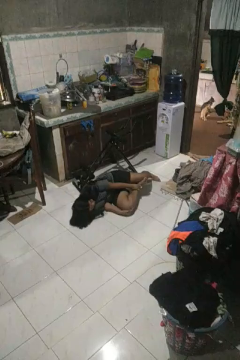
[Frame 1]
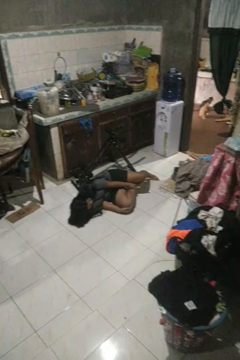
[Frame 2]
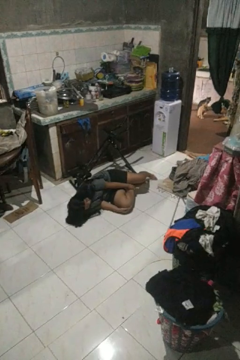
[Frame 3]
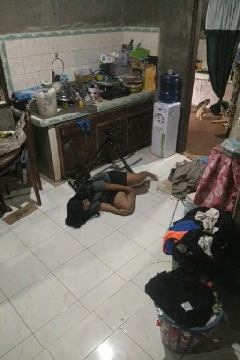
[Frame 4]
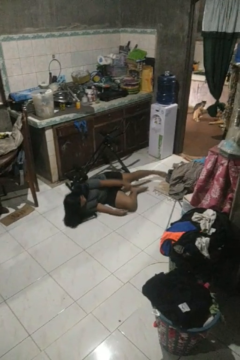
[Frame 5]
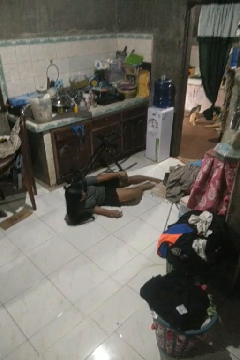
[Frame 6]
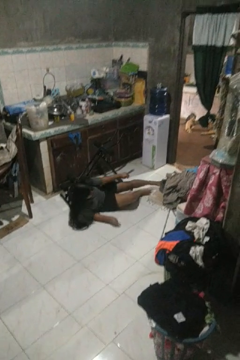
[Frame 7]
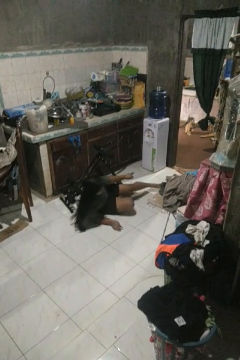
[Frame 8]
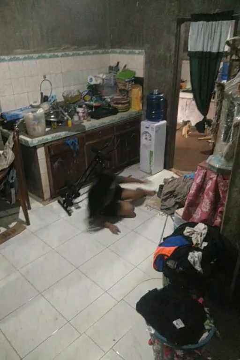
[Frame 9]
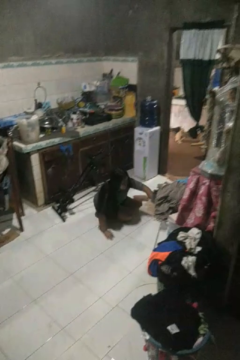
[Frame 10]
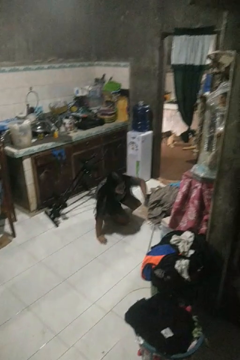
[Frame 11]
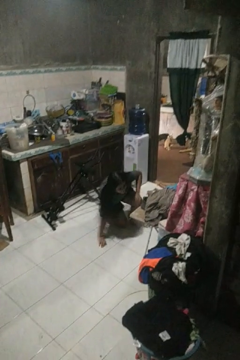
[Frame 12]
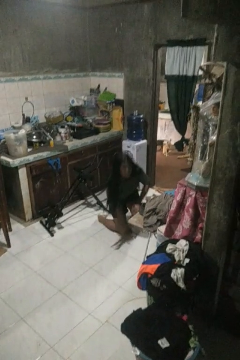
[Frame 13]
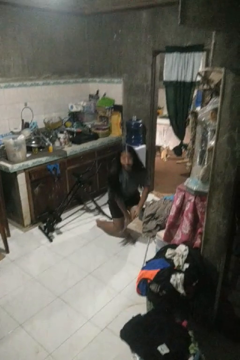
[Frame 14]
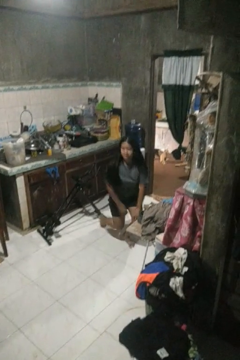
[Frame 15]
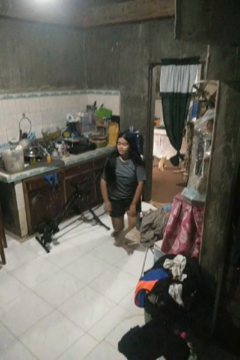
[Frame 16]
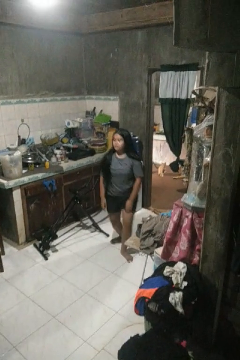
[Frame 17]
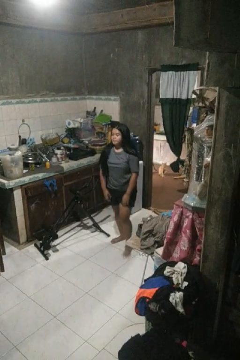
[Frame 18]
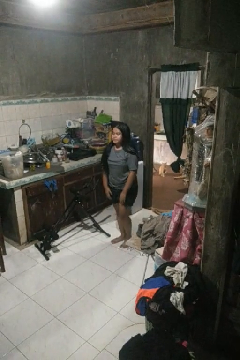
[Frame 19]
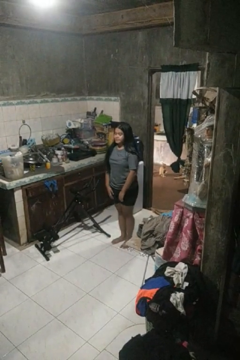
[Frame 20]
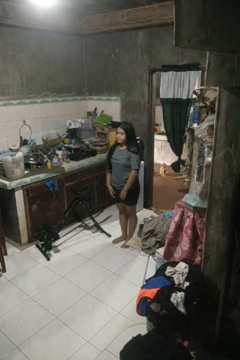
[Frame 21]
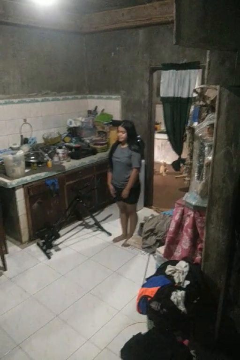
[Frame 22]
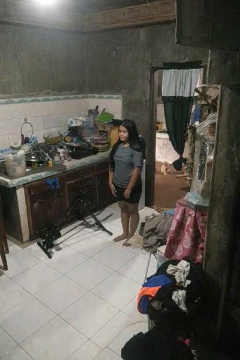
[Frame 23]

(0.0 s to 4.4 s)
person stands up from floor

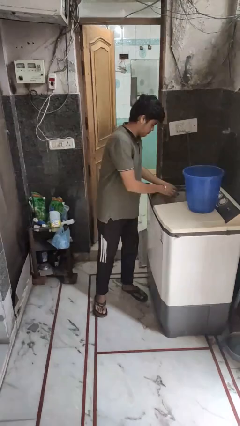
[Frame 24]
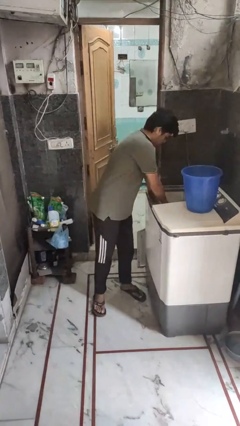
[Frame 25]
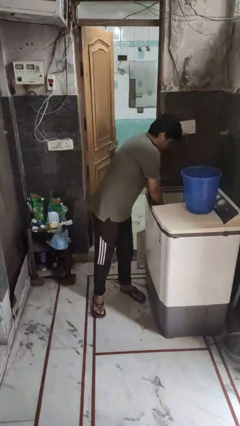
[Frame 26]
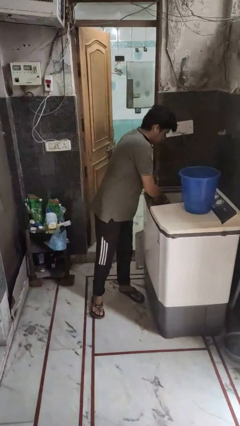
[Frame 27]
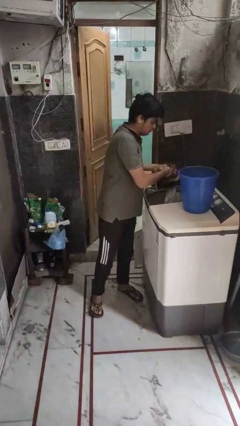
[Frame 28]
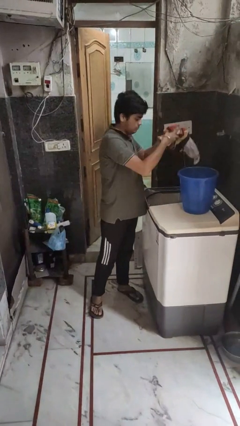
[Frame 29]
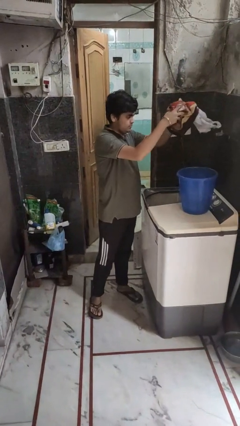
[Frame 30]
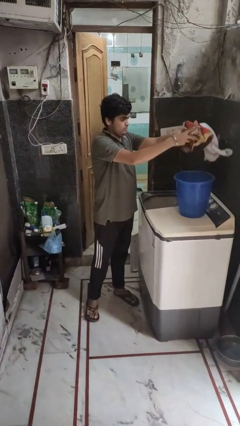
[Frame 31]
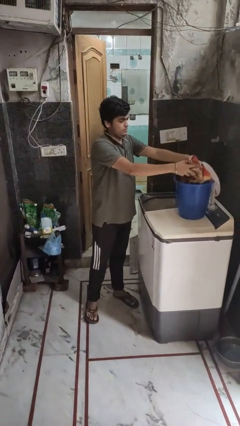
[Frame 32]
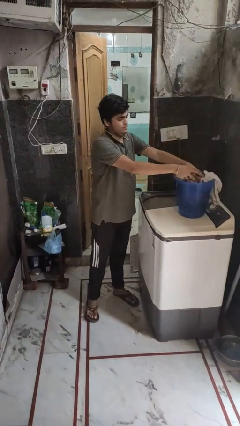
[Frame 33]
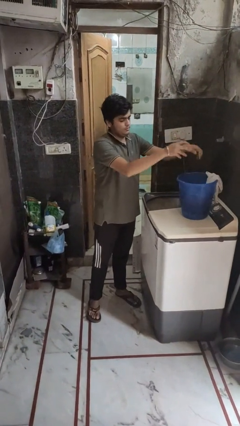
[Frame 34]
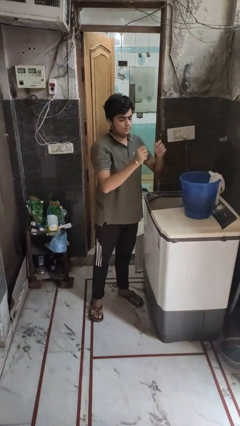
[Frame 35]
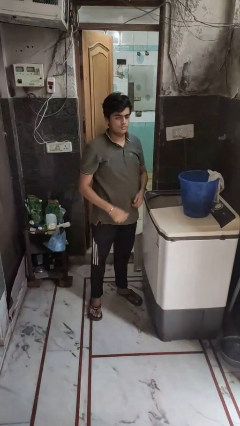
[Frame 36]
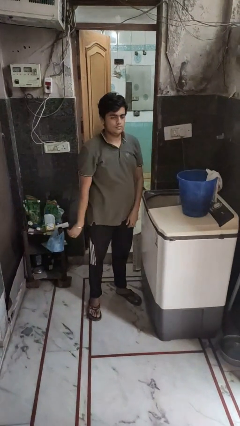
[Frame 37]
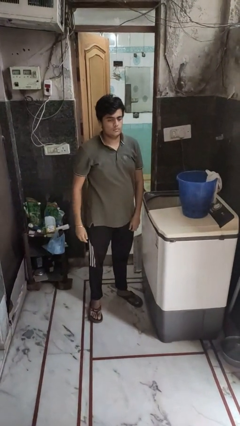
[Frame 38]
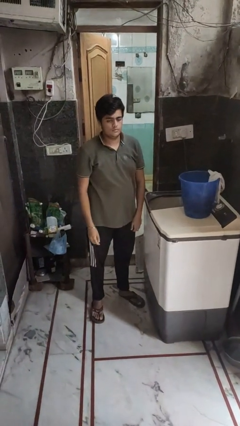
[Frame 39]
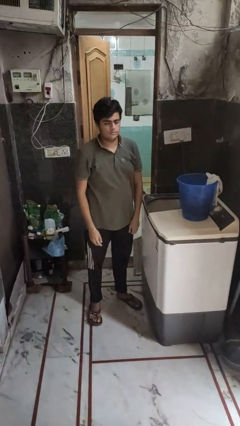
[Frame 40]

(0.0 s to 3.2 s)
person unloads clotheswasher

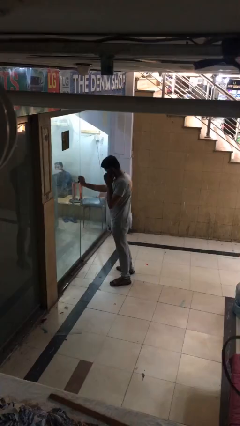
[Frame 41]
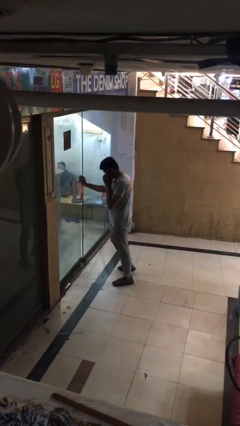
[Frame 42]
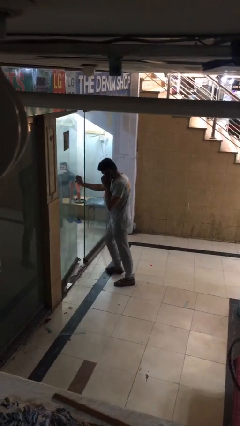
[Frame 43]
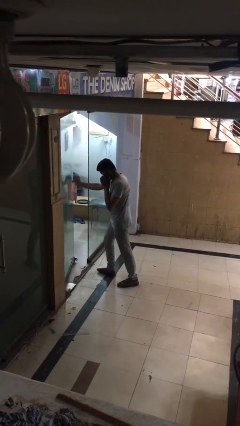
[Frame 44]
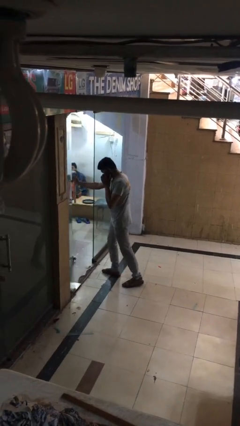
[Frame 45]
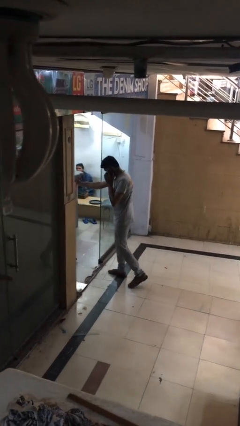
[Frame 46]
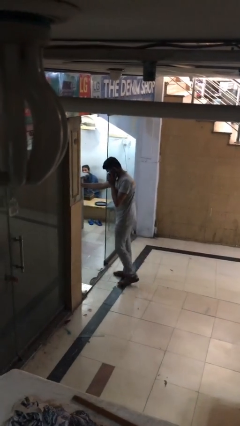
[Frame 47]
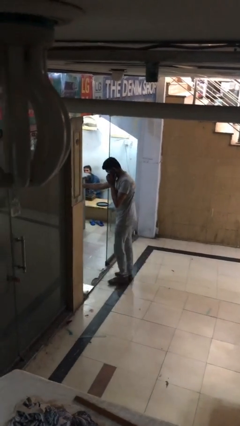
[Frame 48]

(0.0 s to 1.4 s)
person opens facility door

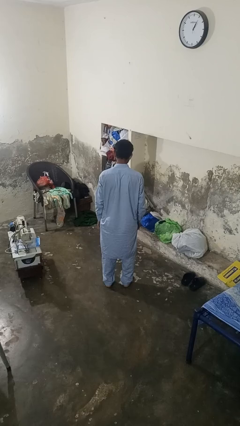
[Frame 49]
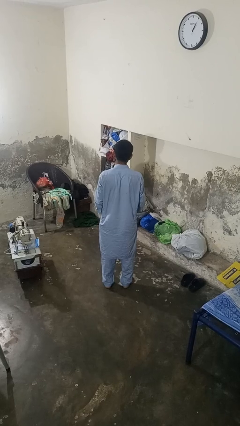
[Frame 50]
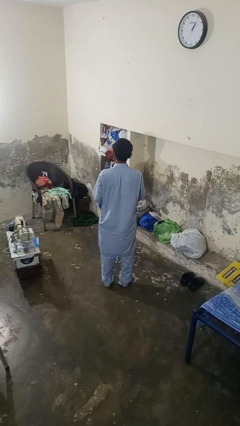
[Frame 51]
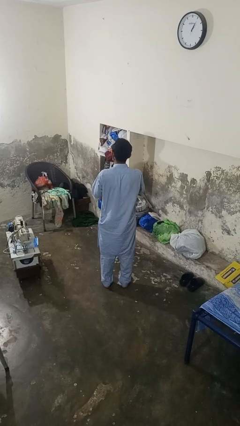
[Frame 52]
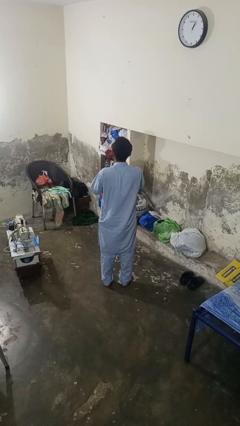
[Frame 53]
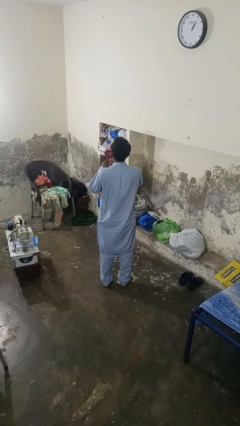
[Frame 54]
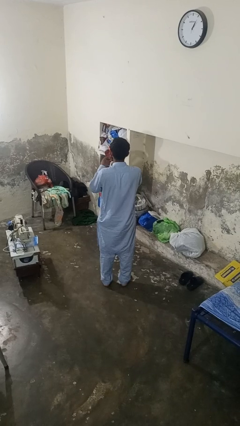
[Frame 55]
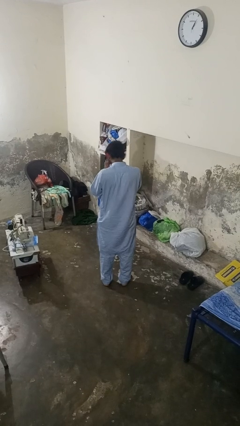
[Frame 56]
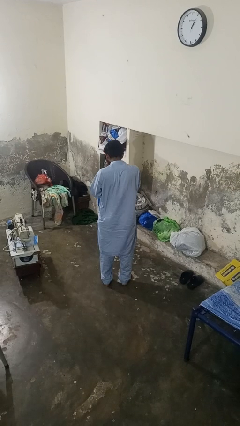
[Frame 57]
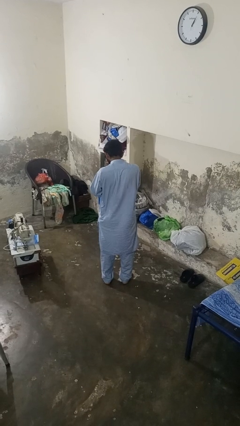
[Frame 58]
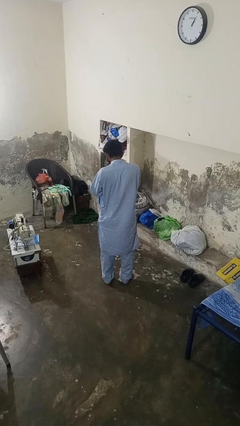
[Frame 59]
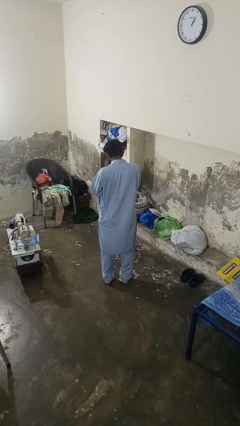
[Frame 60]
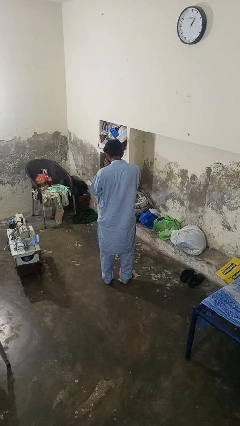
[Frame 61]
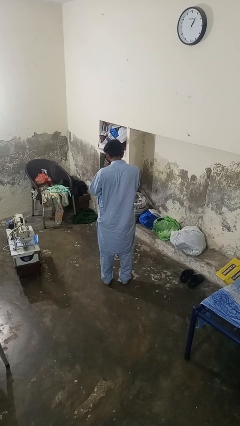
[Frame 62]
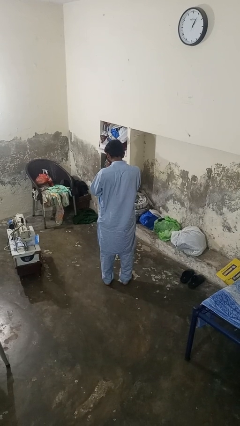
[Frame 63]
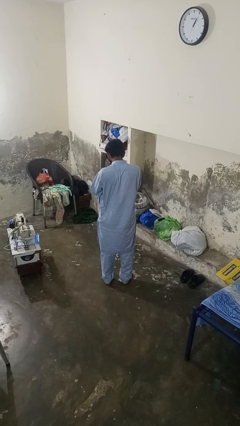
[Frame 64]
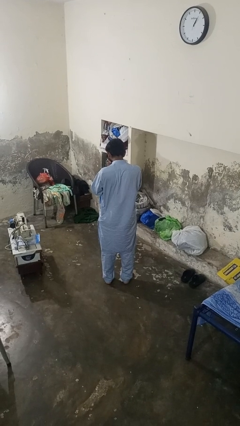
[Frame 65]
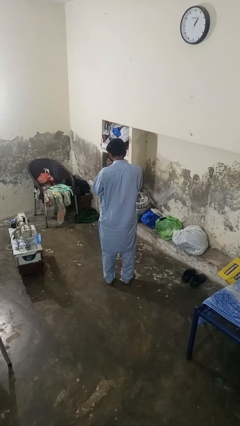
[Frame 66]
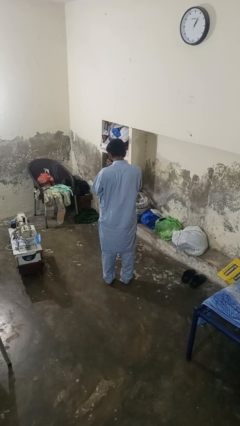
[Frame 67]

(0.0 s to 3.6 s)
person sneezes into hand

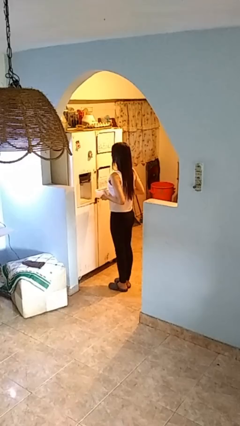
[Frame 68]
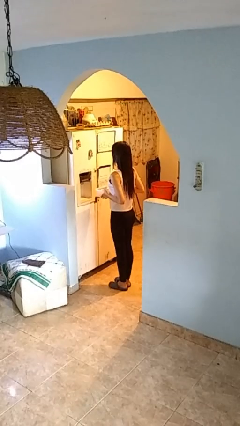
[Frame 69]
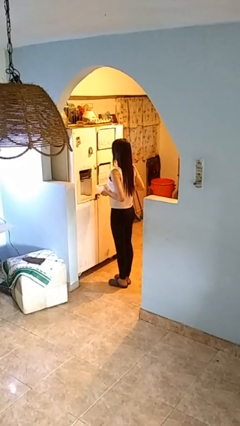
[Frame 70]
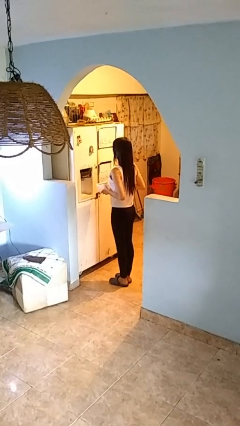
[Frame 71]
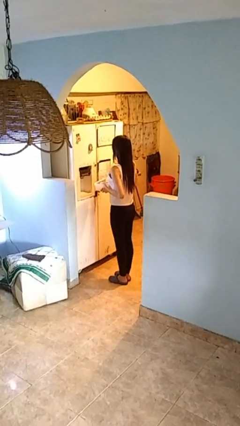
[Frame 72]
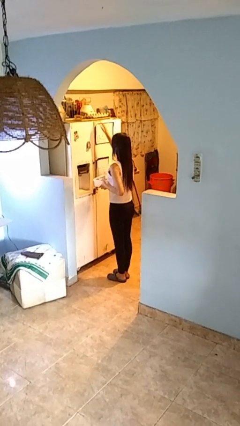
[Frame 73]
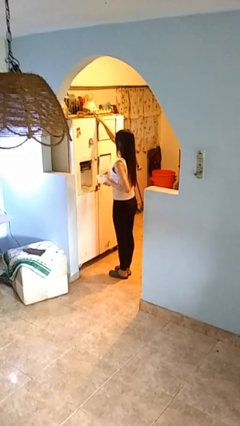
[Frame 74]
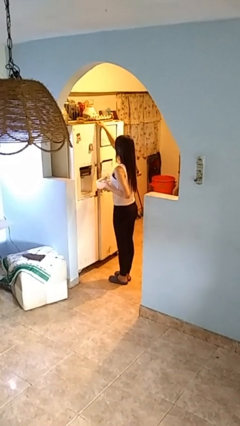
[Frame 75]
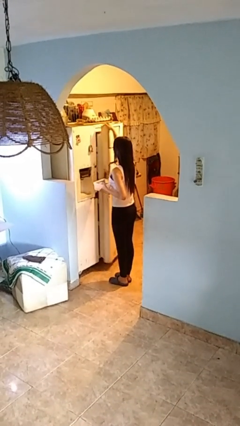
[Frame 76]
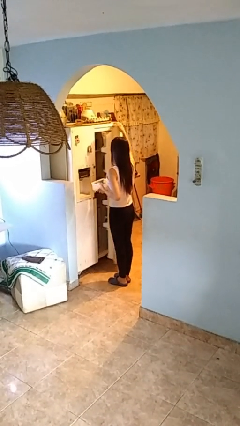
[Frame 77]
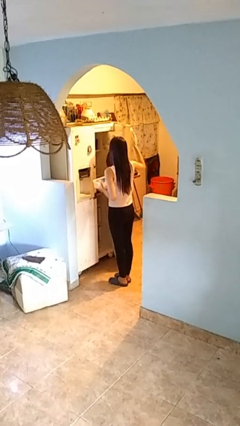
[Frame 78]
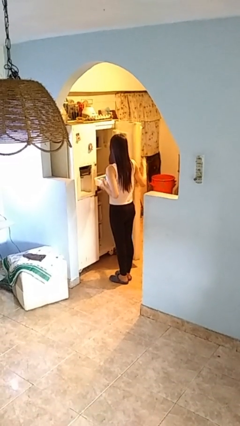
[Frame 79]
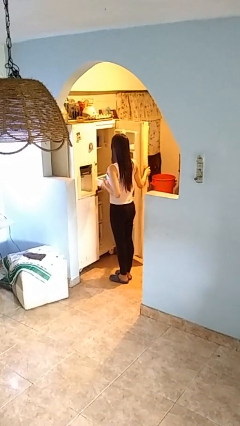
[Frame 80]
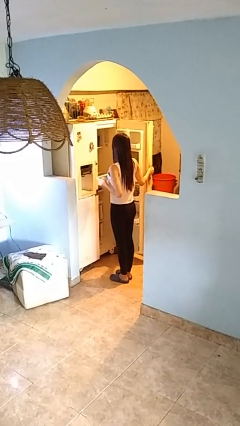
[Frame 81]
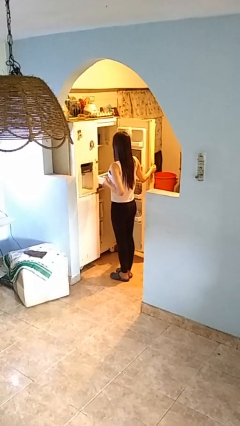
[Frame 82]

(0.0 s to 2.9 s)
person opens refrigerator

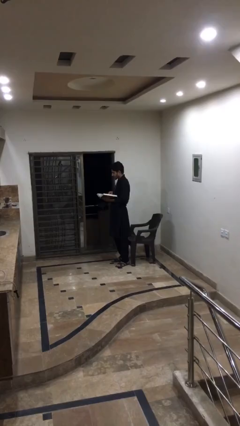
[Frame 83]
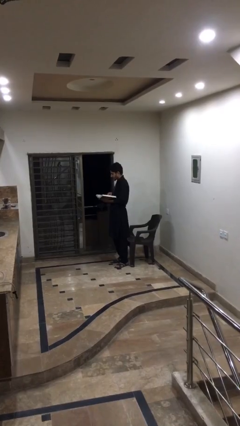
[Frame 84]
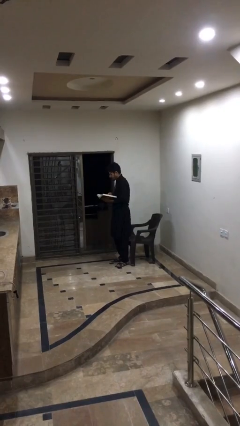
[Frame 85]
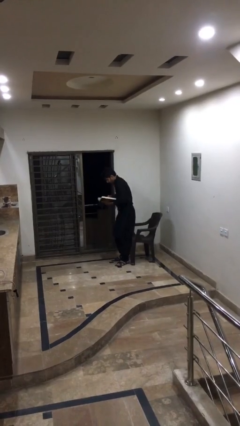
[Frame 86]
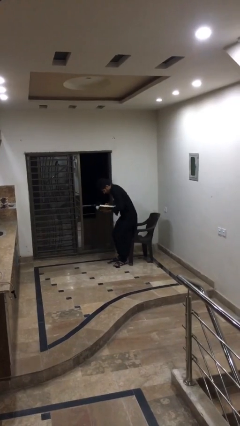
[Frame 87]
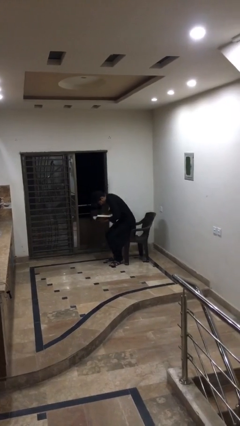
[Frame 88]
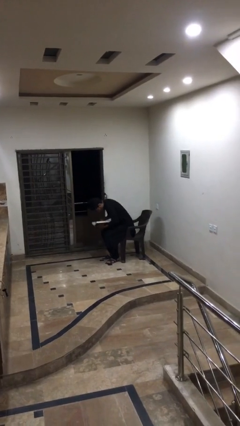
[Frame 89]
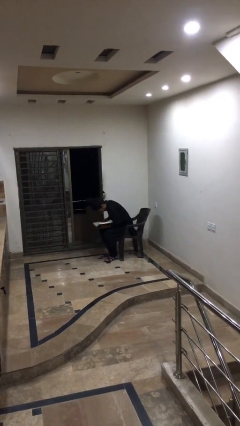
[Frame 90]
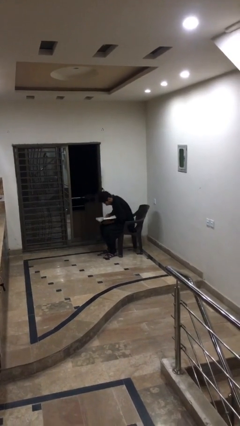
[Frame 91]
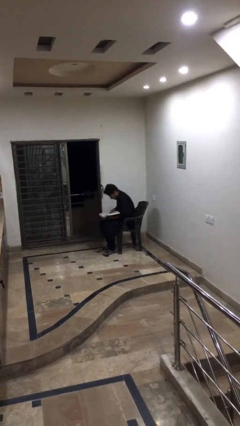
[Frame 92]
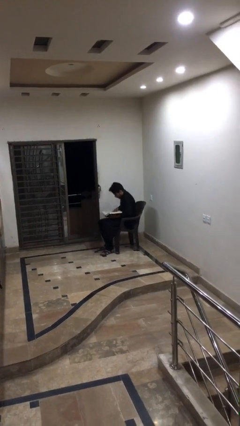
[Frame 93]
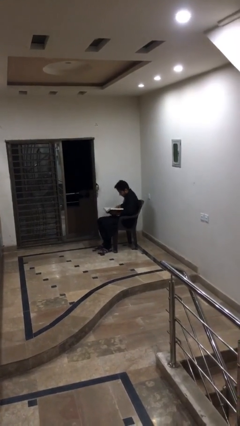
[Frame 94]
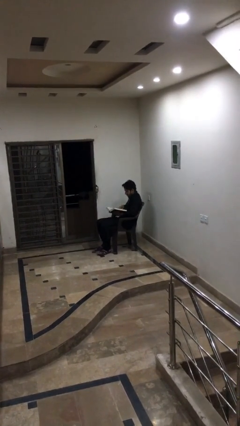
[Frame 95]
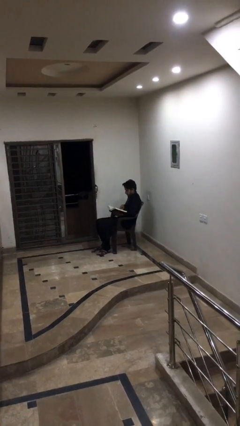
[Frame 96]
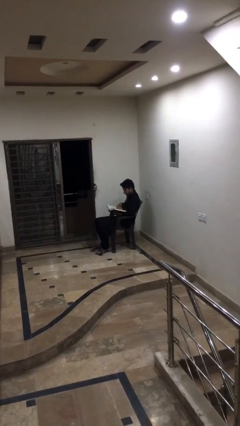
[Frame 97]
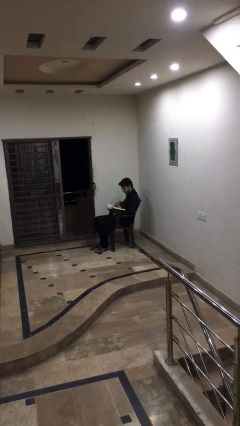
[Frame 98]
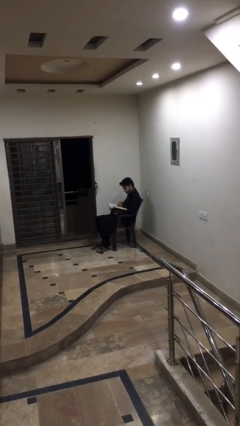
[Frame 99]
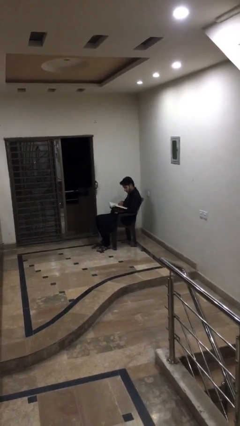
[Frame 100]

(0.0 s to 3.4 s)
person sits down
